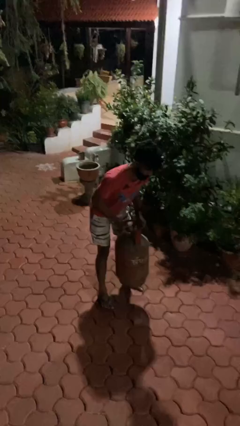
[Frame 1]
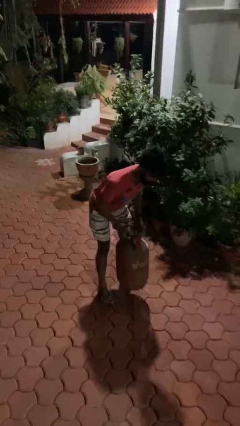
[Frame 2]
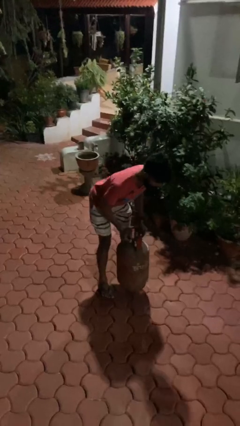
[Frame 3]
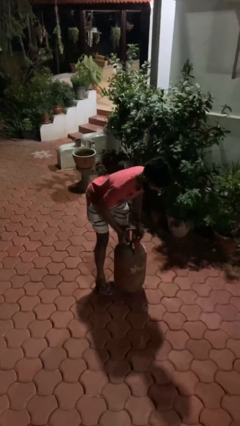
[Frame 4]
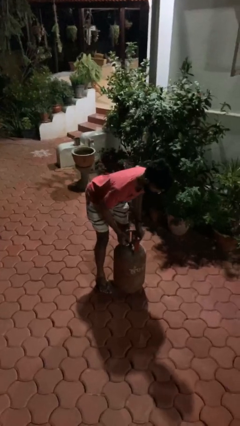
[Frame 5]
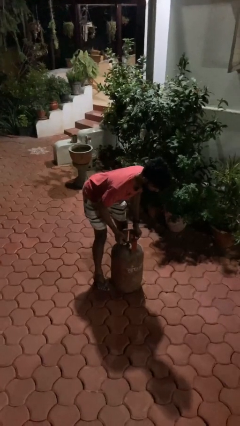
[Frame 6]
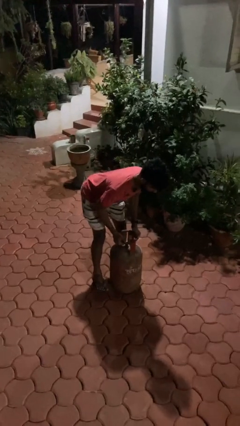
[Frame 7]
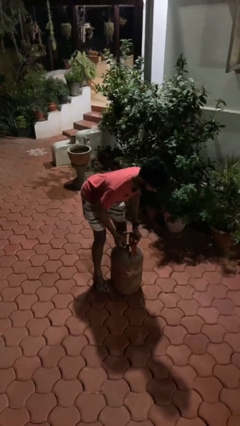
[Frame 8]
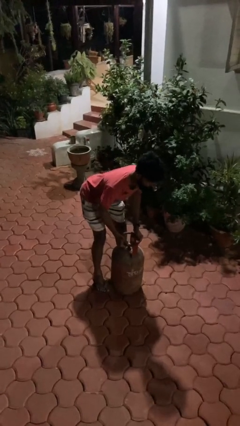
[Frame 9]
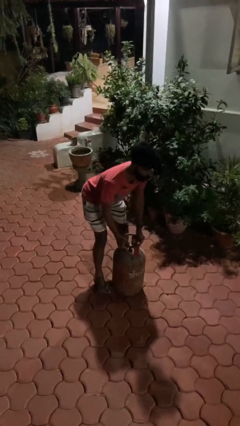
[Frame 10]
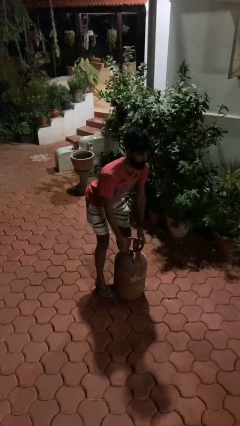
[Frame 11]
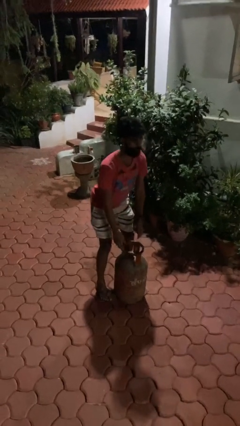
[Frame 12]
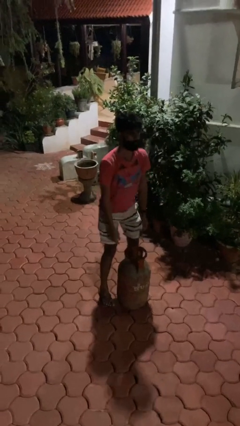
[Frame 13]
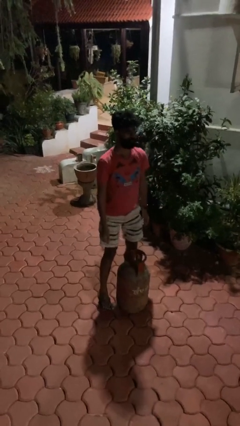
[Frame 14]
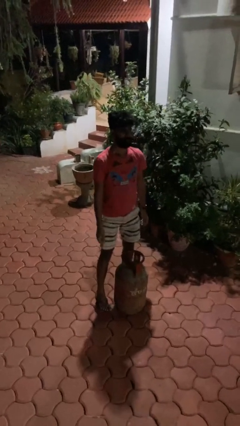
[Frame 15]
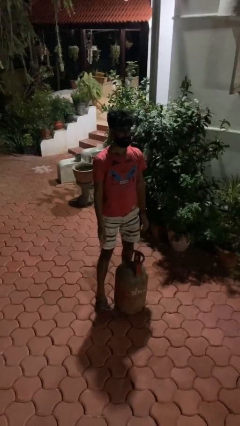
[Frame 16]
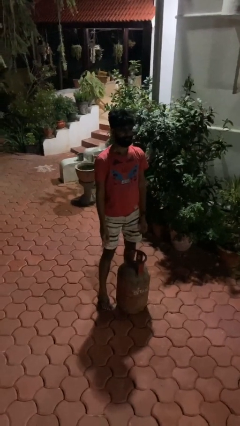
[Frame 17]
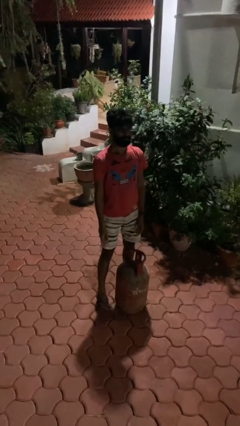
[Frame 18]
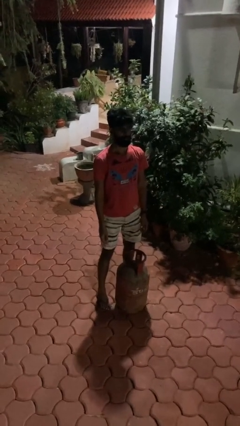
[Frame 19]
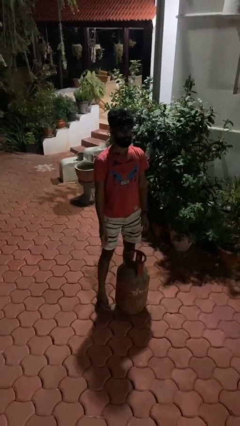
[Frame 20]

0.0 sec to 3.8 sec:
person puts down object on floor

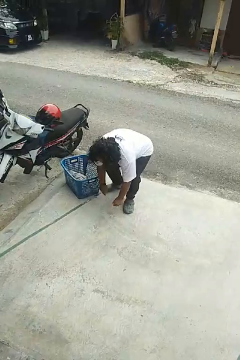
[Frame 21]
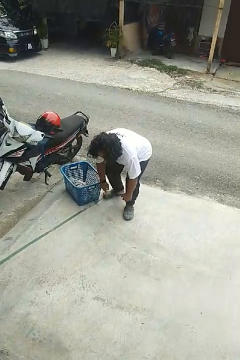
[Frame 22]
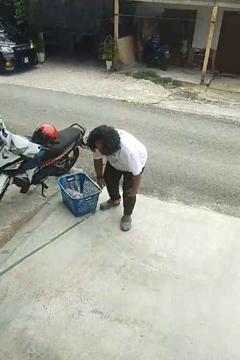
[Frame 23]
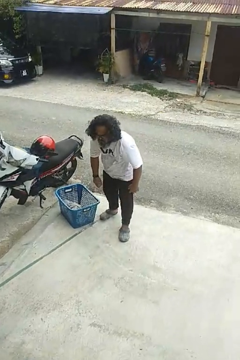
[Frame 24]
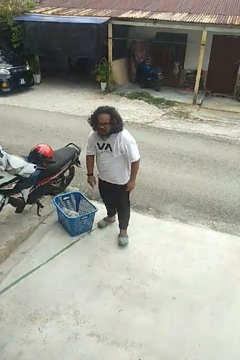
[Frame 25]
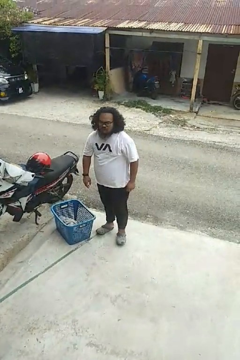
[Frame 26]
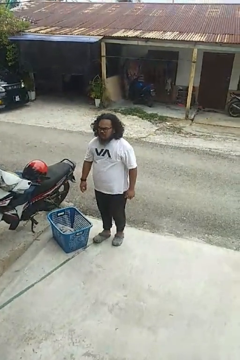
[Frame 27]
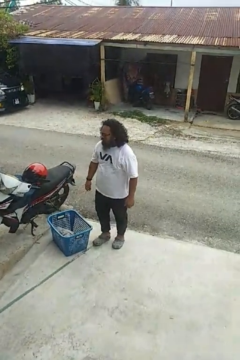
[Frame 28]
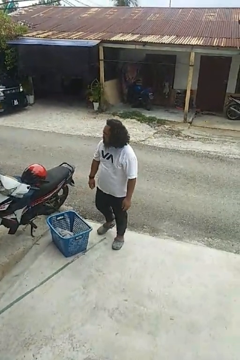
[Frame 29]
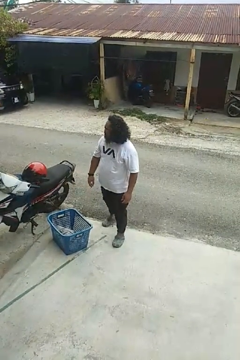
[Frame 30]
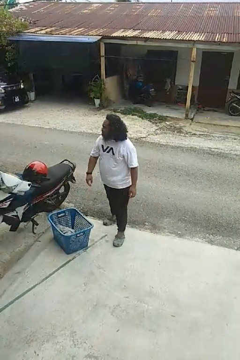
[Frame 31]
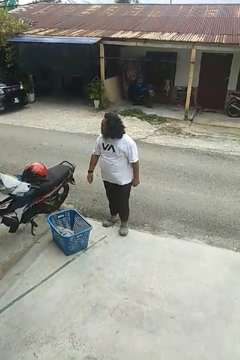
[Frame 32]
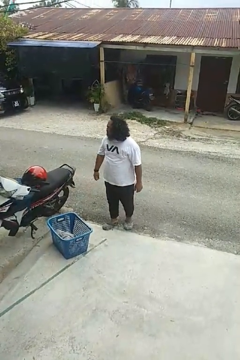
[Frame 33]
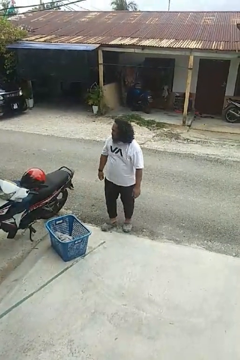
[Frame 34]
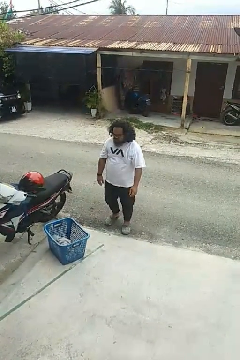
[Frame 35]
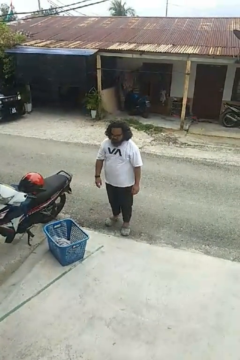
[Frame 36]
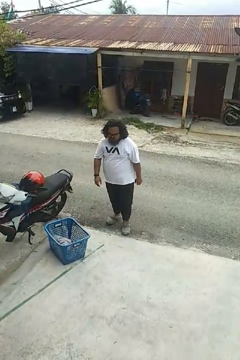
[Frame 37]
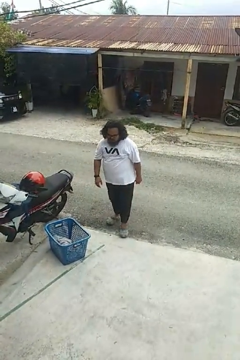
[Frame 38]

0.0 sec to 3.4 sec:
person stands up from floor

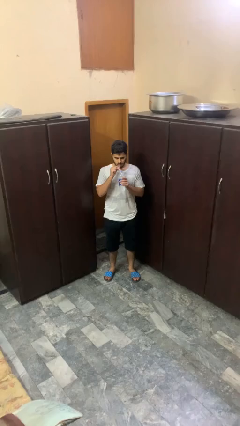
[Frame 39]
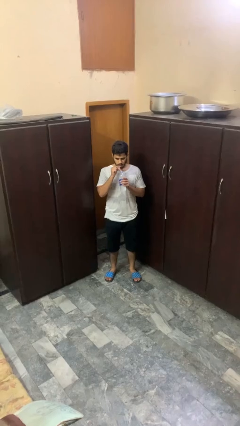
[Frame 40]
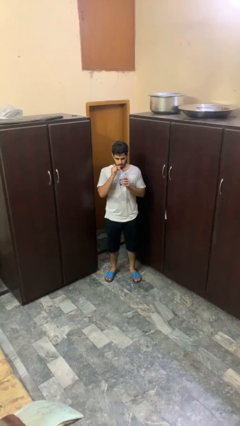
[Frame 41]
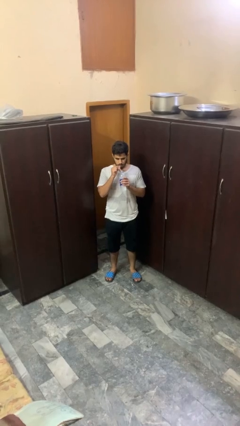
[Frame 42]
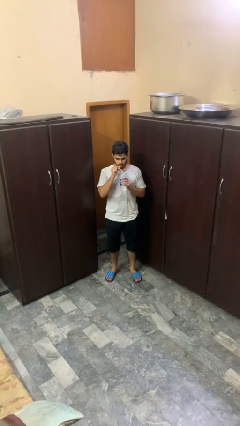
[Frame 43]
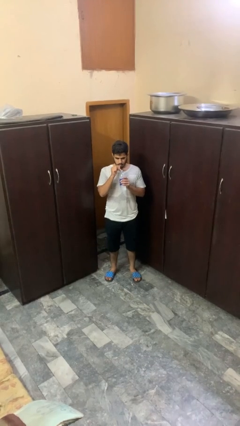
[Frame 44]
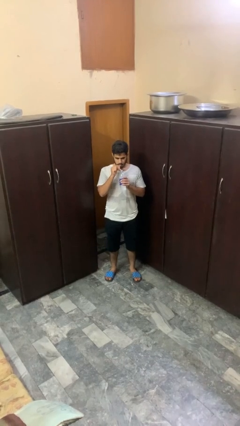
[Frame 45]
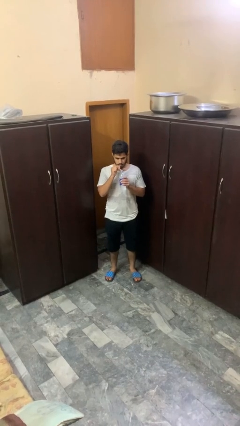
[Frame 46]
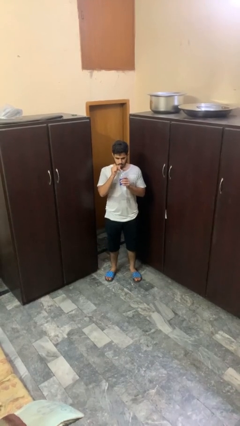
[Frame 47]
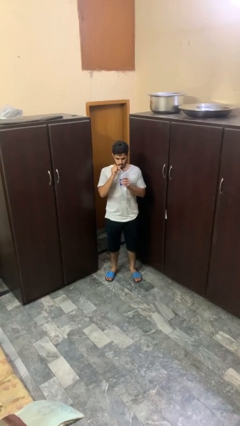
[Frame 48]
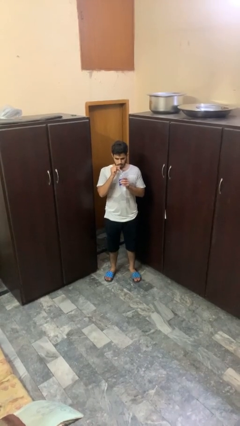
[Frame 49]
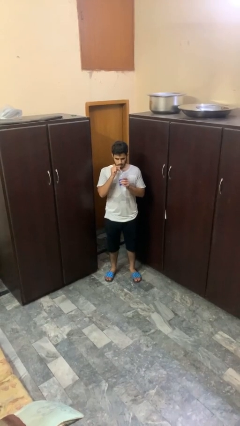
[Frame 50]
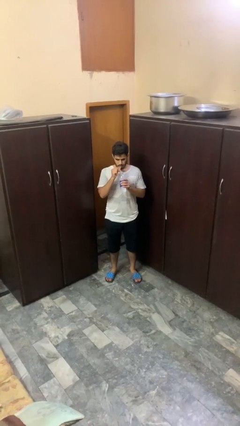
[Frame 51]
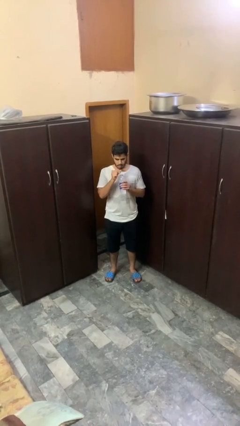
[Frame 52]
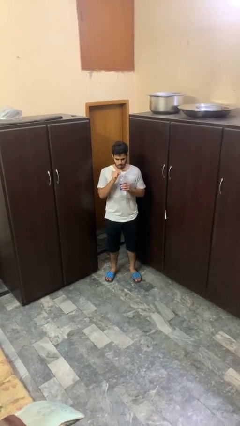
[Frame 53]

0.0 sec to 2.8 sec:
person drinks from straw

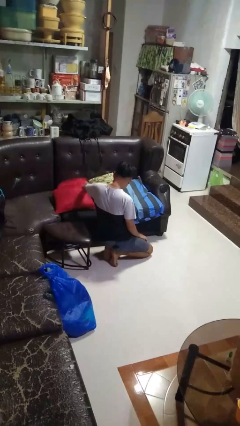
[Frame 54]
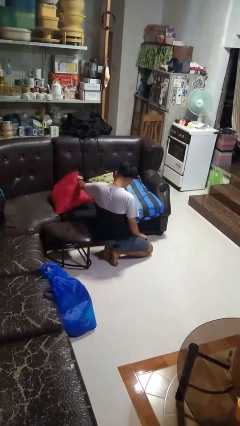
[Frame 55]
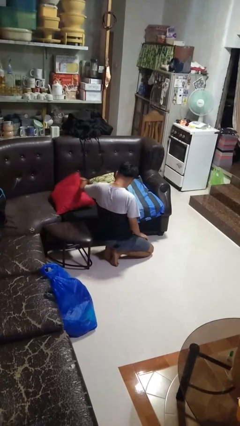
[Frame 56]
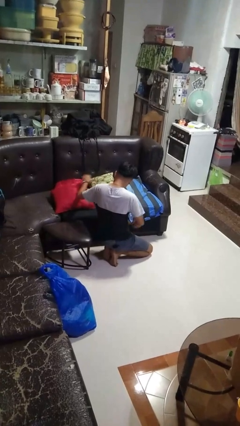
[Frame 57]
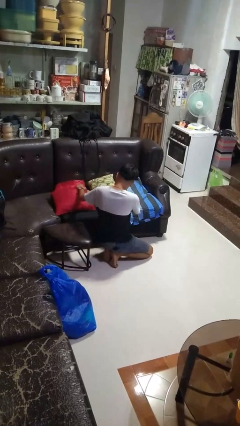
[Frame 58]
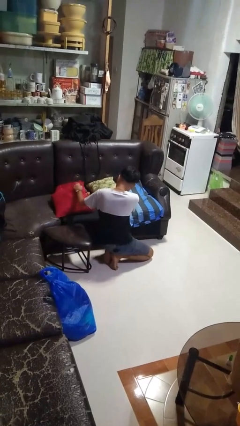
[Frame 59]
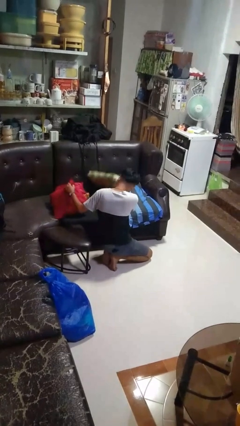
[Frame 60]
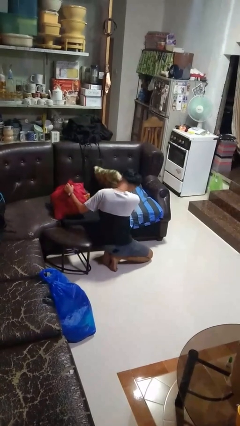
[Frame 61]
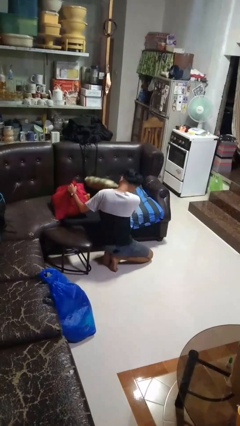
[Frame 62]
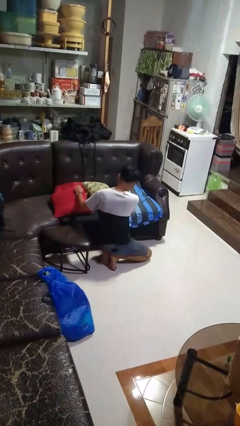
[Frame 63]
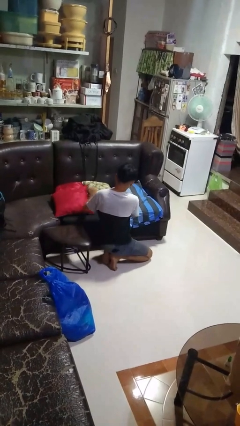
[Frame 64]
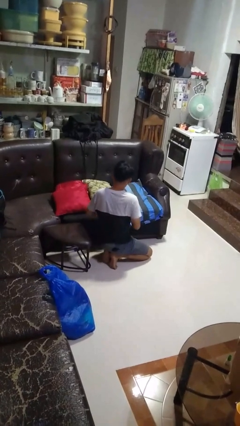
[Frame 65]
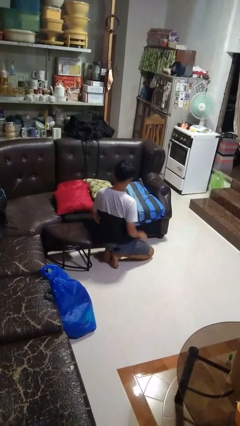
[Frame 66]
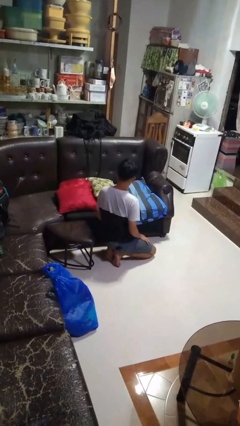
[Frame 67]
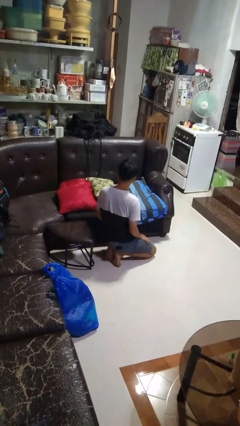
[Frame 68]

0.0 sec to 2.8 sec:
person searches in couch

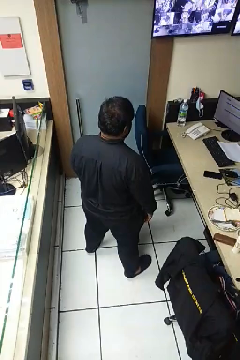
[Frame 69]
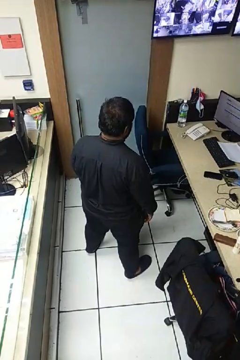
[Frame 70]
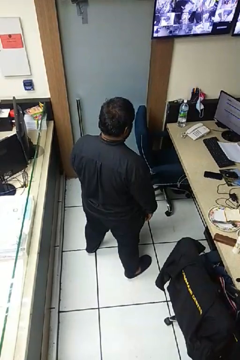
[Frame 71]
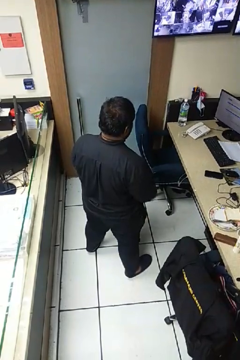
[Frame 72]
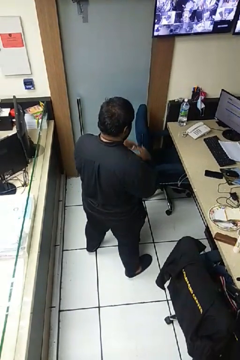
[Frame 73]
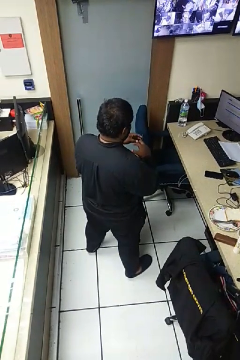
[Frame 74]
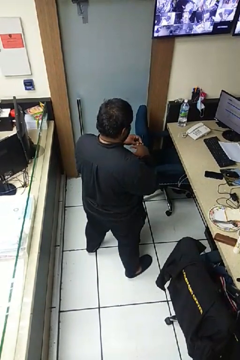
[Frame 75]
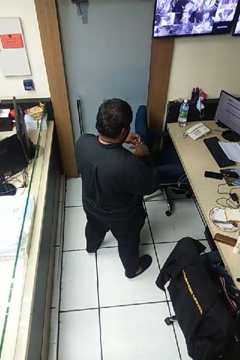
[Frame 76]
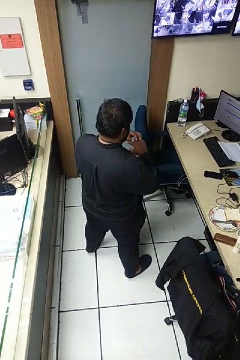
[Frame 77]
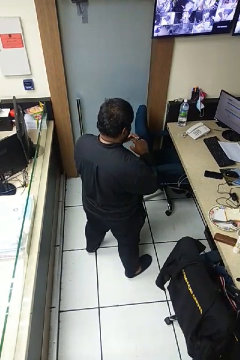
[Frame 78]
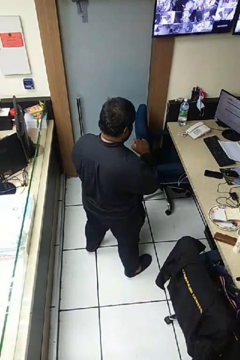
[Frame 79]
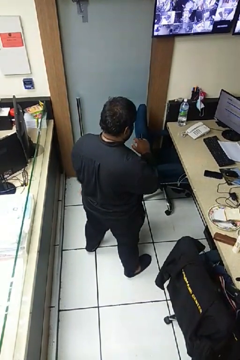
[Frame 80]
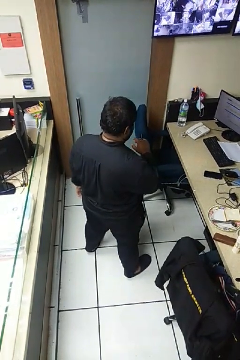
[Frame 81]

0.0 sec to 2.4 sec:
person puts on ring

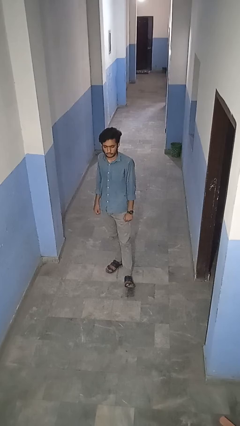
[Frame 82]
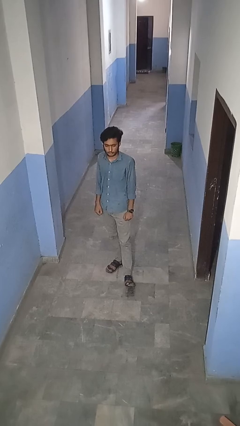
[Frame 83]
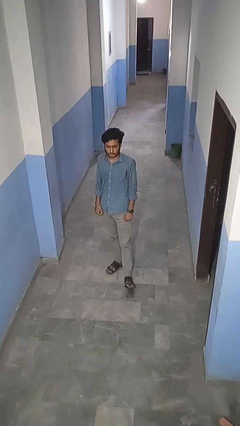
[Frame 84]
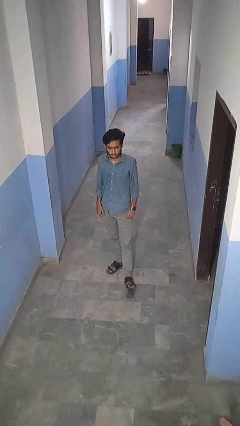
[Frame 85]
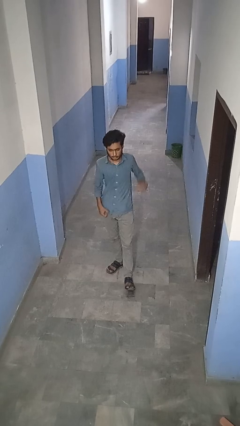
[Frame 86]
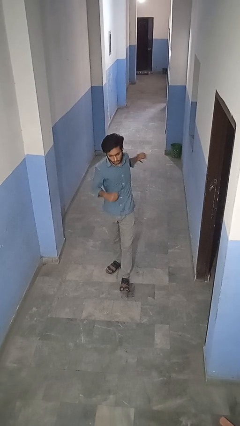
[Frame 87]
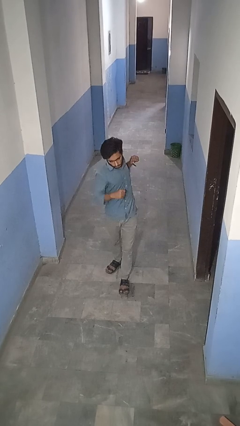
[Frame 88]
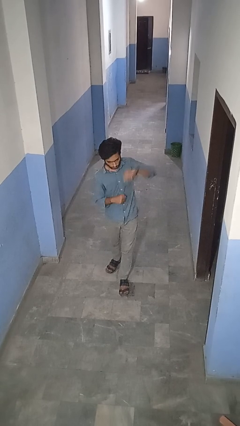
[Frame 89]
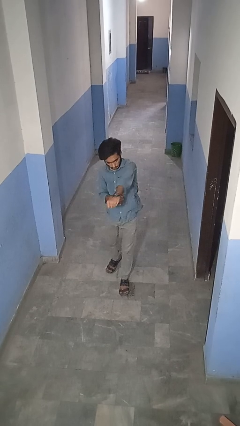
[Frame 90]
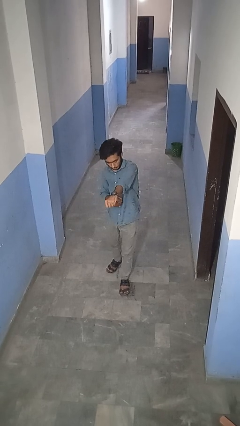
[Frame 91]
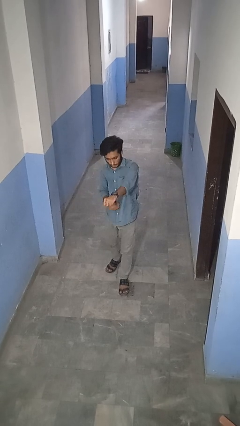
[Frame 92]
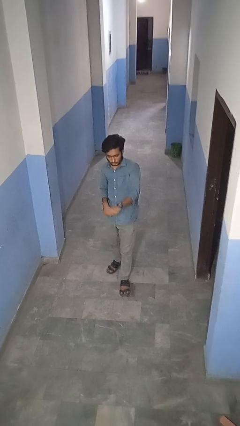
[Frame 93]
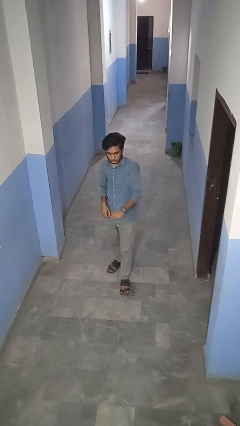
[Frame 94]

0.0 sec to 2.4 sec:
person punches

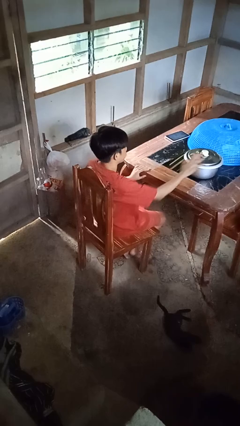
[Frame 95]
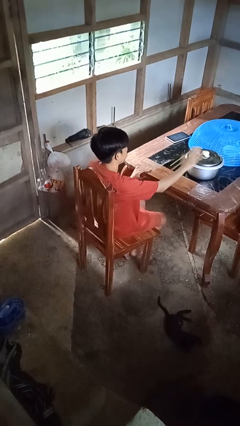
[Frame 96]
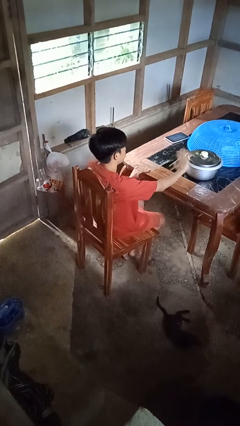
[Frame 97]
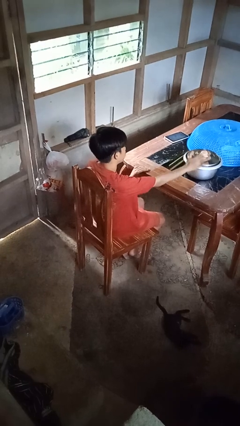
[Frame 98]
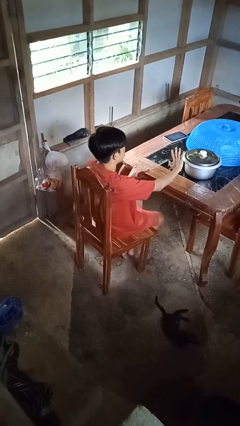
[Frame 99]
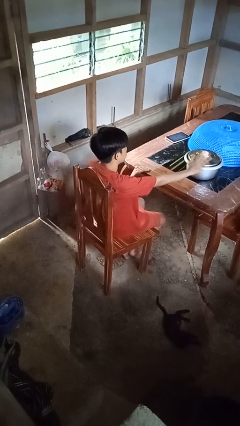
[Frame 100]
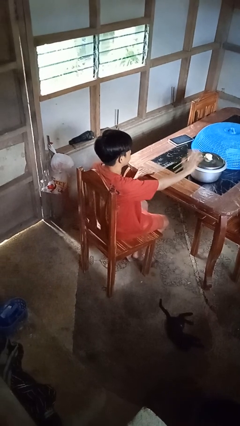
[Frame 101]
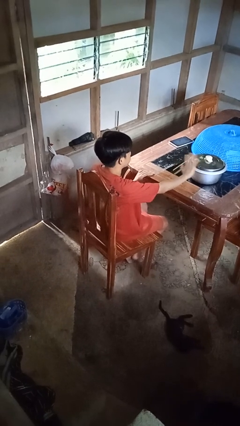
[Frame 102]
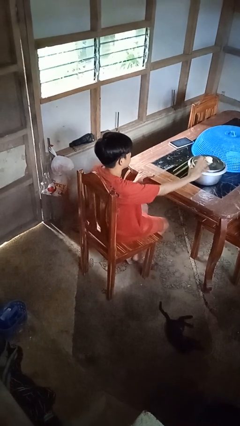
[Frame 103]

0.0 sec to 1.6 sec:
person waves hand over object
